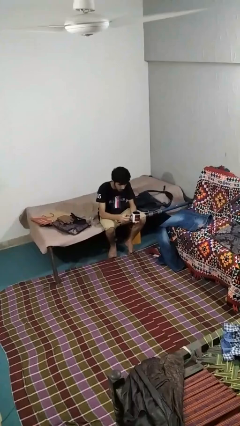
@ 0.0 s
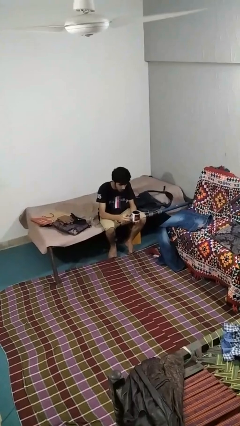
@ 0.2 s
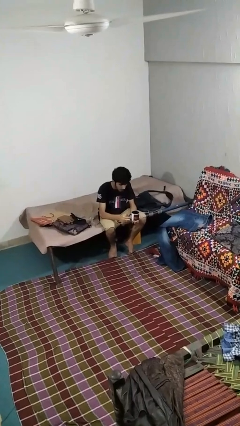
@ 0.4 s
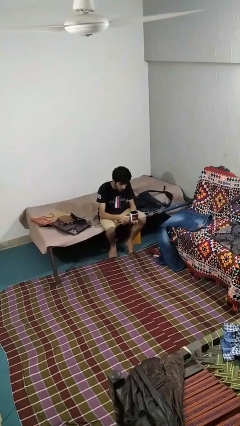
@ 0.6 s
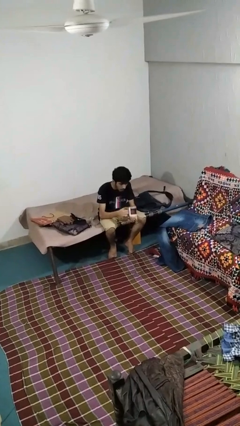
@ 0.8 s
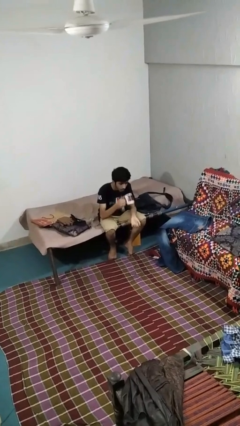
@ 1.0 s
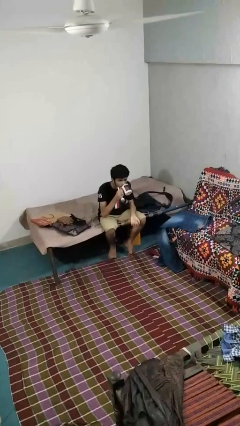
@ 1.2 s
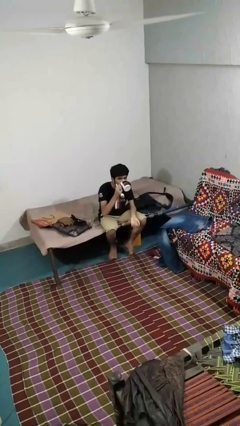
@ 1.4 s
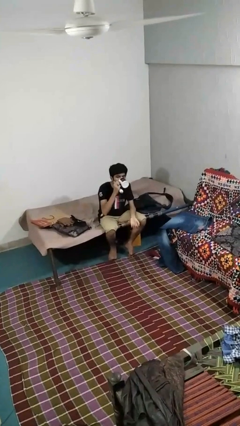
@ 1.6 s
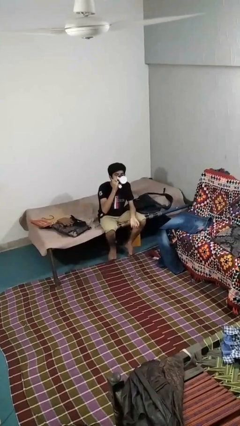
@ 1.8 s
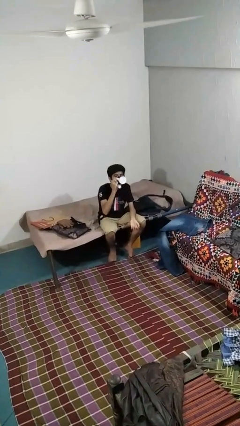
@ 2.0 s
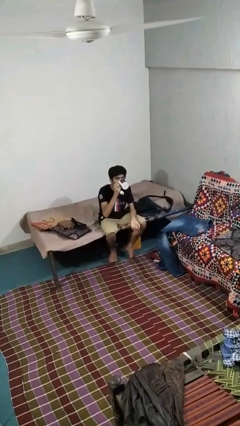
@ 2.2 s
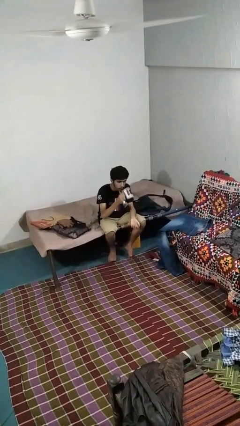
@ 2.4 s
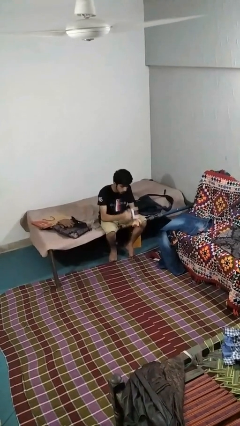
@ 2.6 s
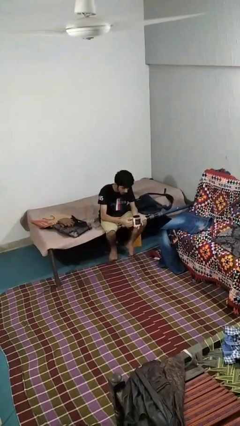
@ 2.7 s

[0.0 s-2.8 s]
person drinks from mug

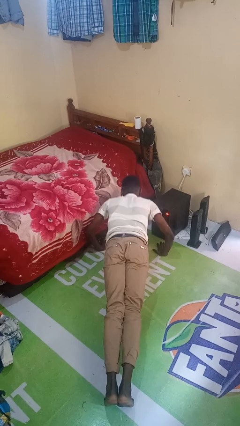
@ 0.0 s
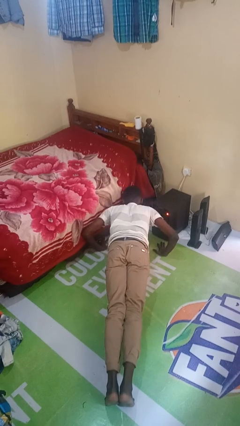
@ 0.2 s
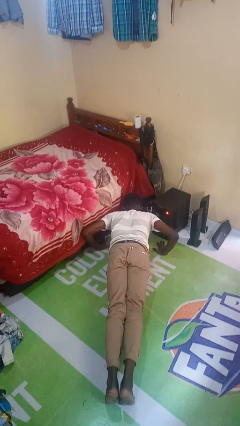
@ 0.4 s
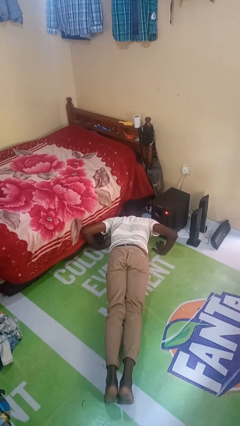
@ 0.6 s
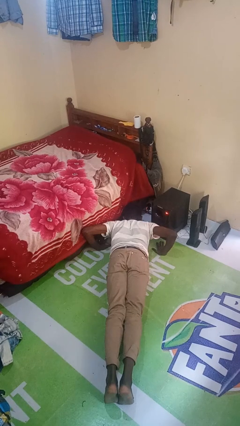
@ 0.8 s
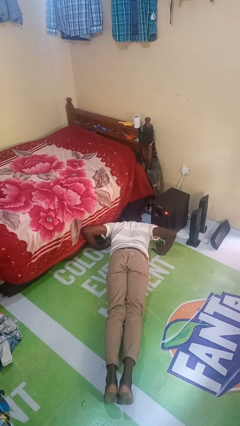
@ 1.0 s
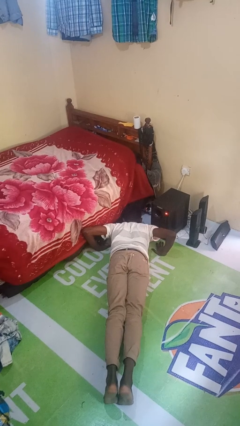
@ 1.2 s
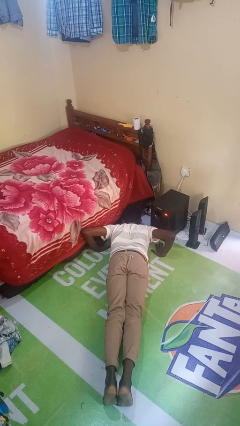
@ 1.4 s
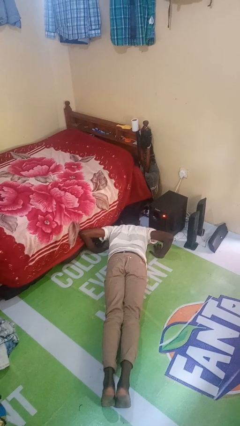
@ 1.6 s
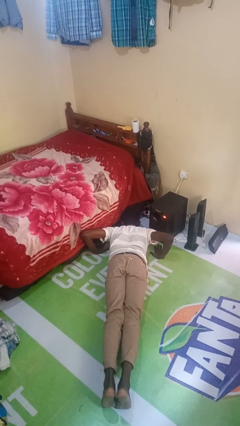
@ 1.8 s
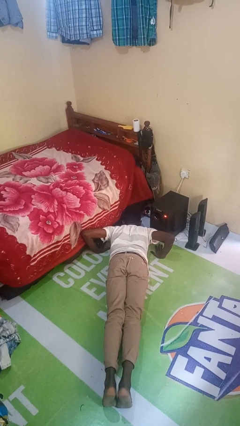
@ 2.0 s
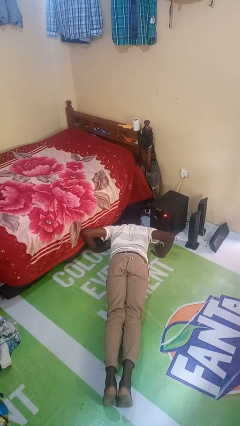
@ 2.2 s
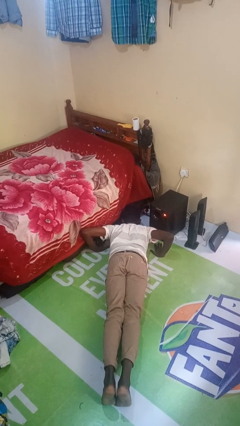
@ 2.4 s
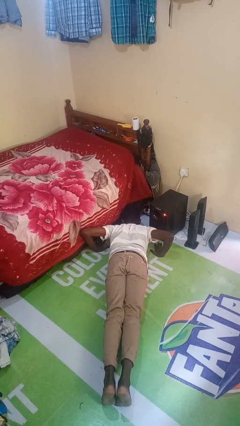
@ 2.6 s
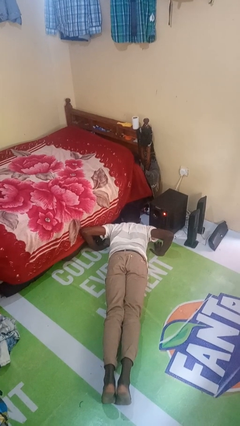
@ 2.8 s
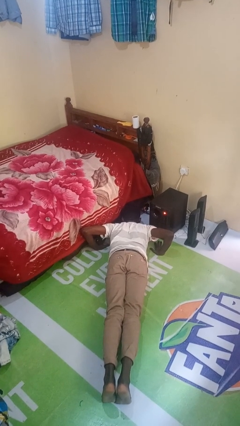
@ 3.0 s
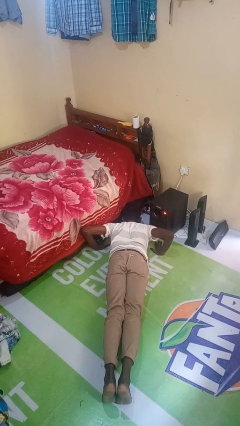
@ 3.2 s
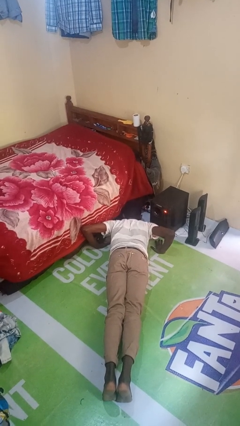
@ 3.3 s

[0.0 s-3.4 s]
person exercises with pushup

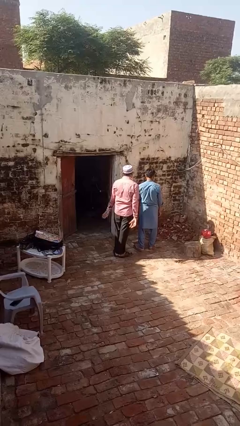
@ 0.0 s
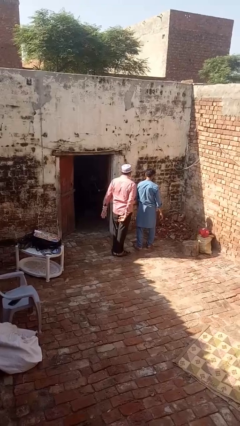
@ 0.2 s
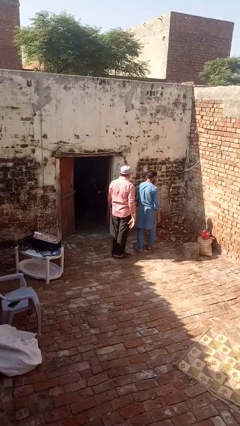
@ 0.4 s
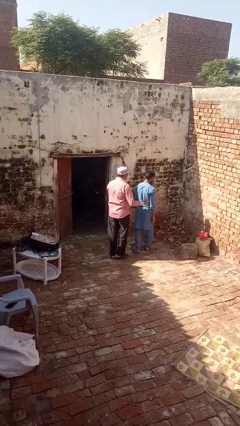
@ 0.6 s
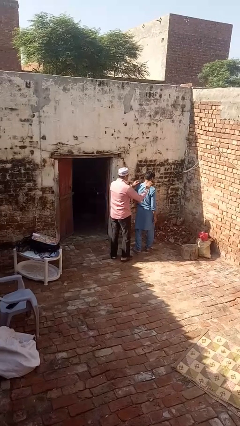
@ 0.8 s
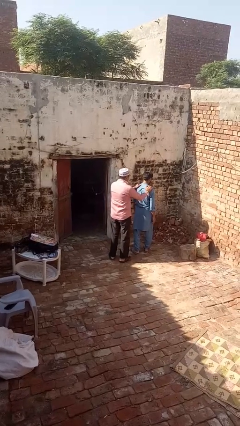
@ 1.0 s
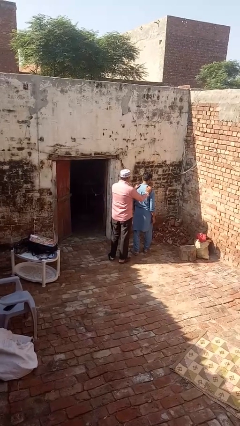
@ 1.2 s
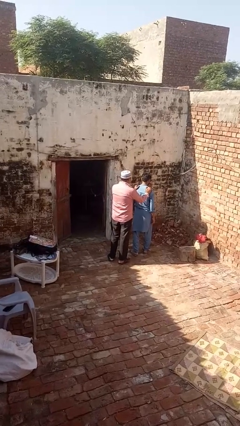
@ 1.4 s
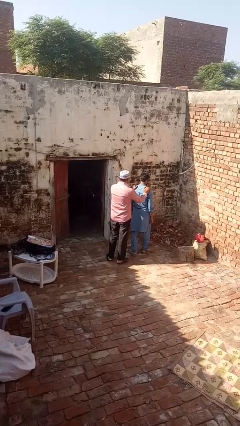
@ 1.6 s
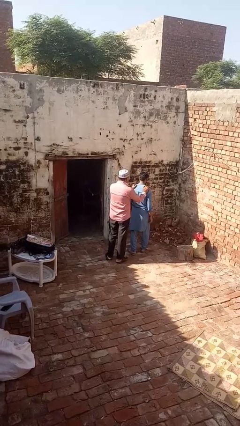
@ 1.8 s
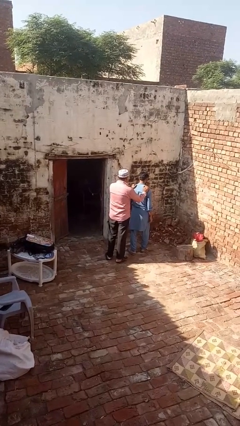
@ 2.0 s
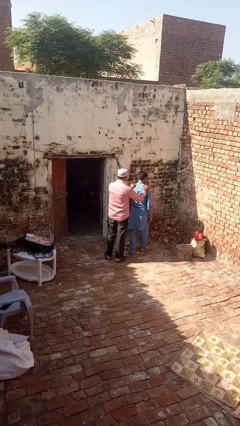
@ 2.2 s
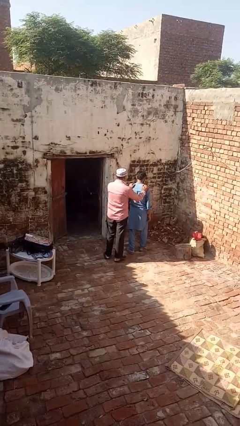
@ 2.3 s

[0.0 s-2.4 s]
person grabs person by shoulder

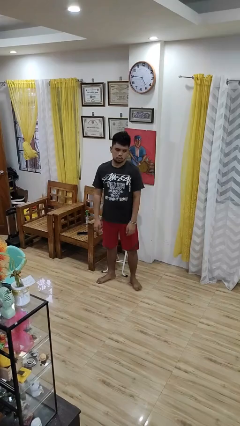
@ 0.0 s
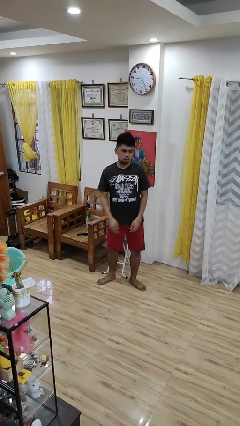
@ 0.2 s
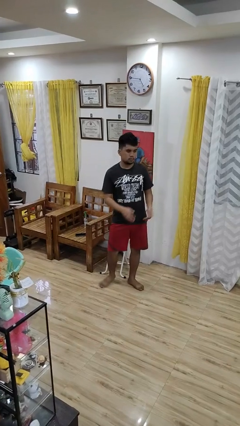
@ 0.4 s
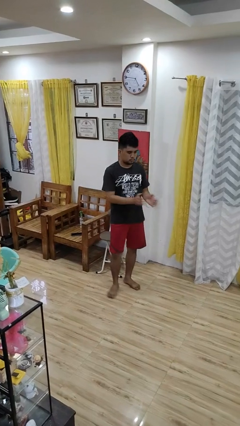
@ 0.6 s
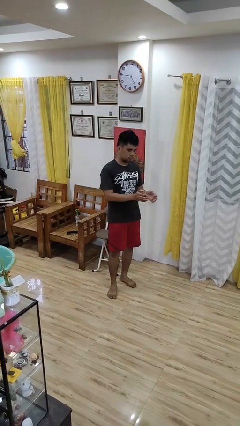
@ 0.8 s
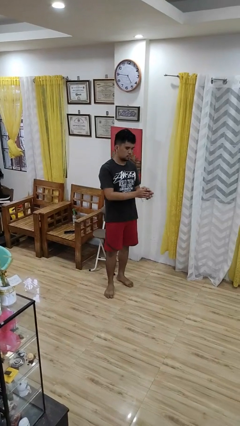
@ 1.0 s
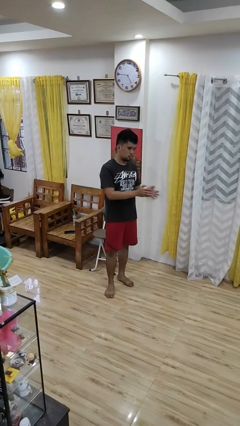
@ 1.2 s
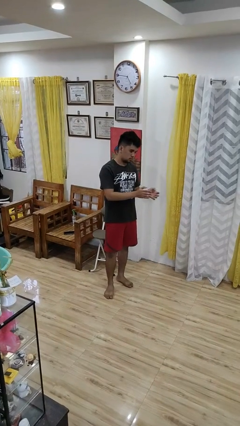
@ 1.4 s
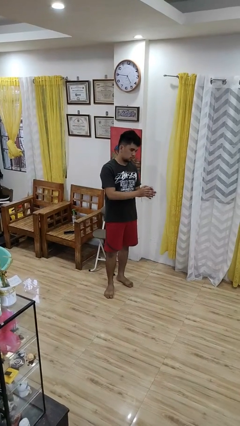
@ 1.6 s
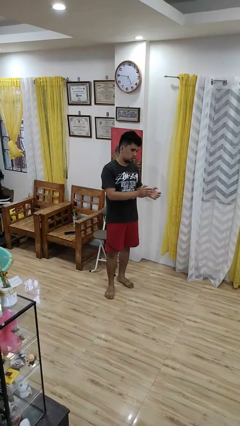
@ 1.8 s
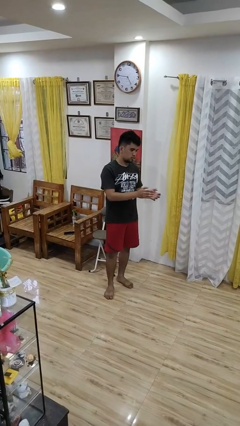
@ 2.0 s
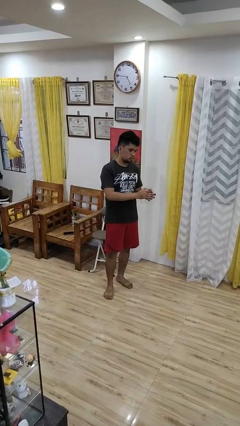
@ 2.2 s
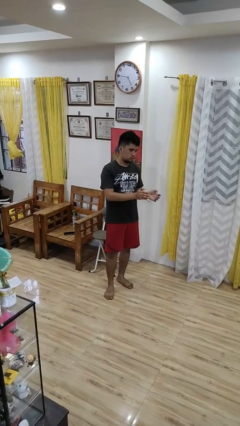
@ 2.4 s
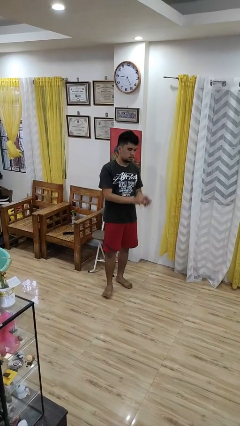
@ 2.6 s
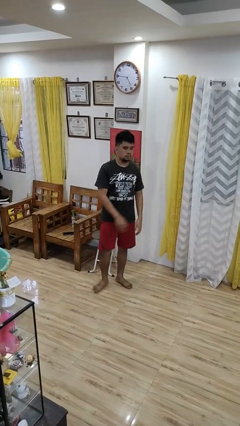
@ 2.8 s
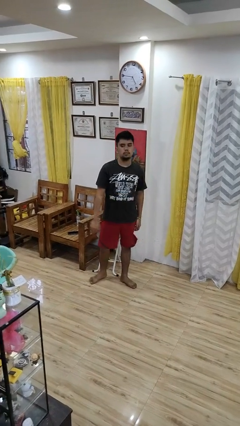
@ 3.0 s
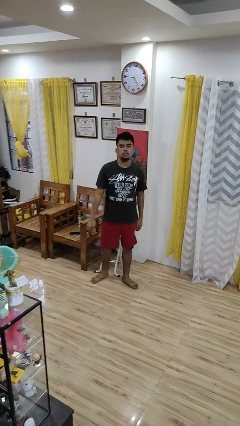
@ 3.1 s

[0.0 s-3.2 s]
person claps hands

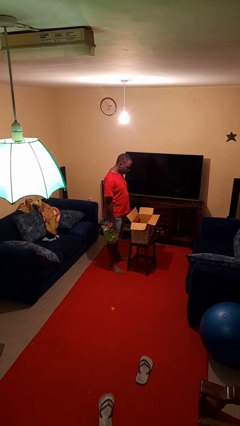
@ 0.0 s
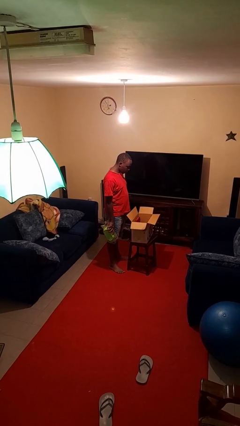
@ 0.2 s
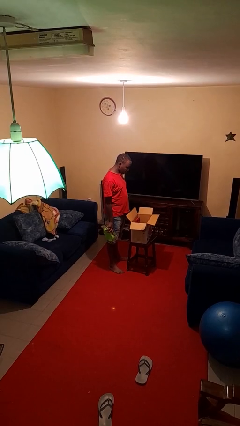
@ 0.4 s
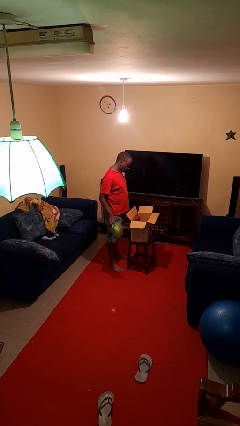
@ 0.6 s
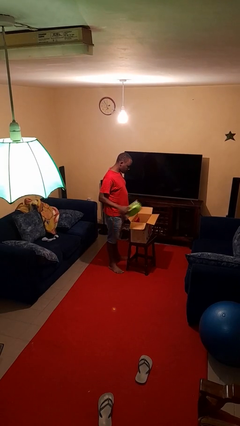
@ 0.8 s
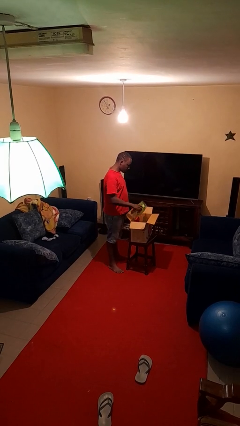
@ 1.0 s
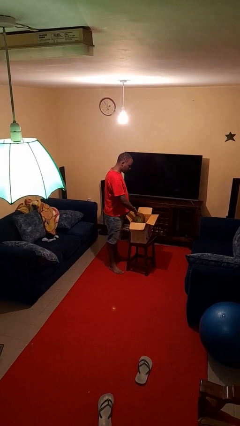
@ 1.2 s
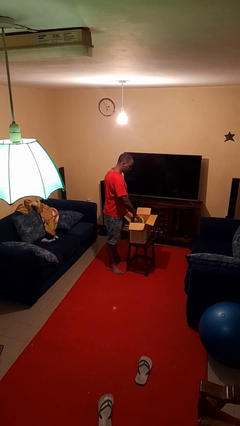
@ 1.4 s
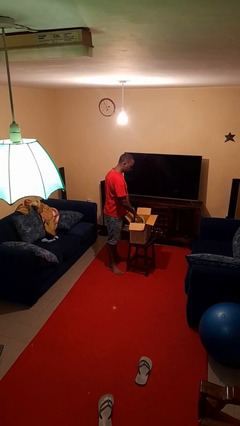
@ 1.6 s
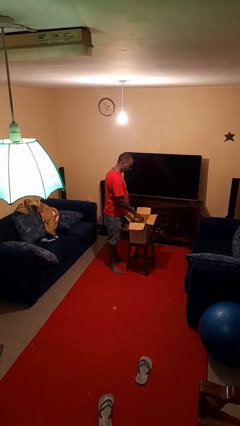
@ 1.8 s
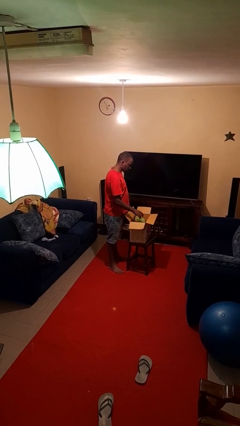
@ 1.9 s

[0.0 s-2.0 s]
person puts object into box

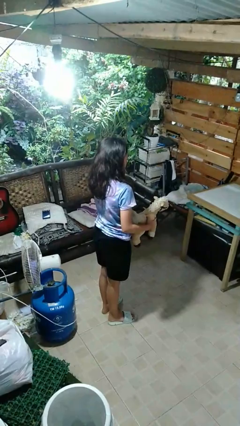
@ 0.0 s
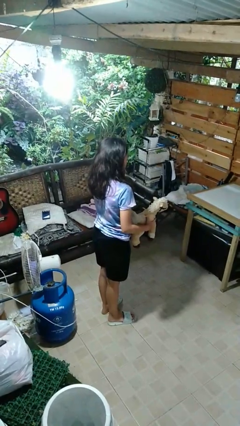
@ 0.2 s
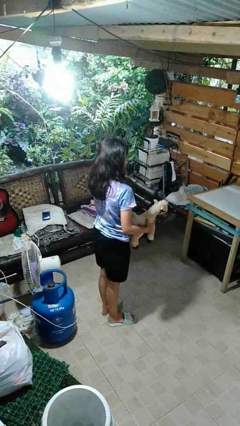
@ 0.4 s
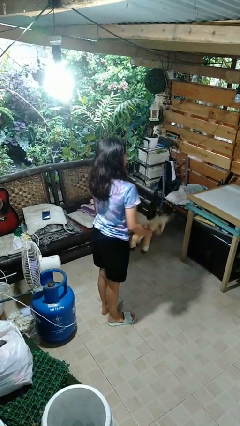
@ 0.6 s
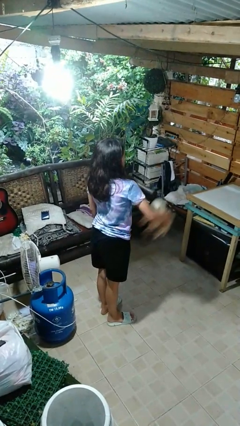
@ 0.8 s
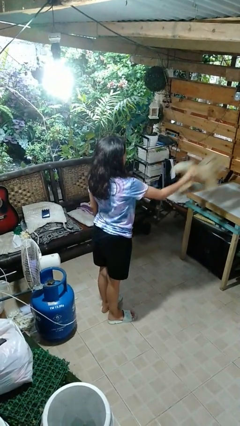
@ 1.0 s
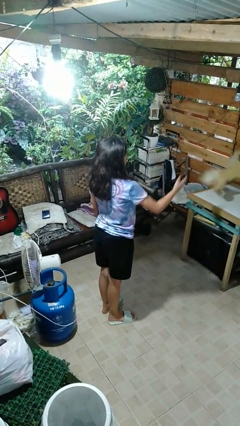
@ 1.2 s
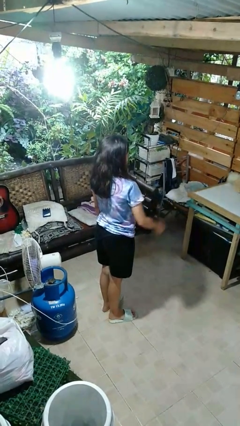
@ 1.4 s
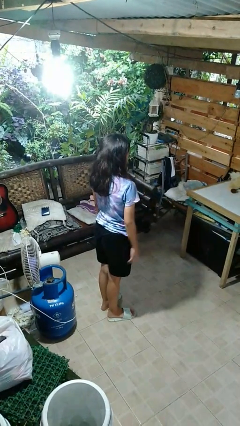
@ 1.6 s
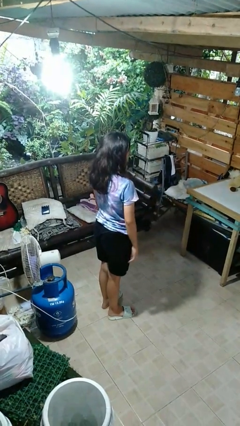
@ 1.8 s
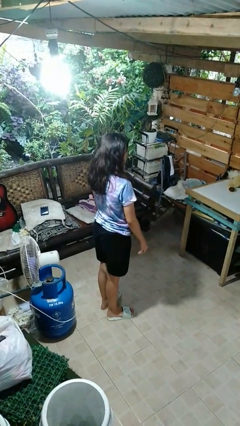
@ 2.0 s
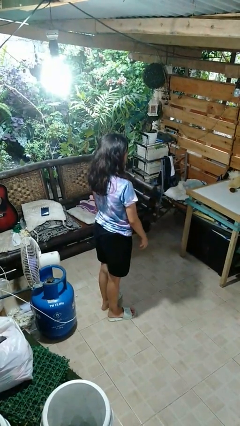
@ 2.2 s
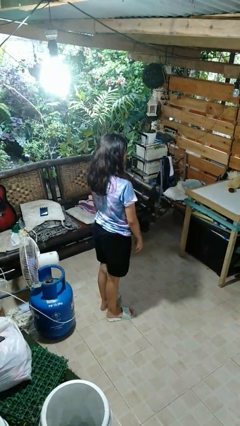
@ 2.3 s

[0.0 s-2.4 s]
person throws object on table

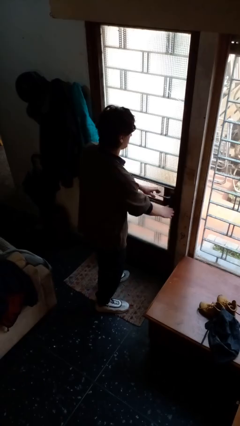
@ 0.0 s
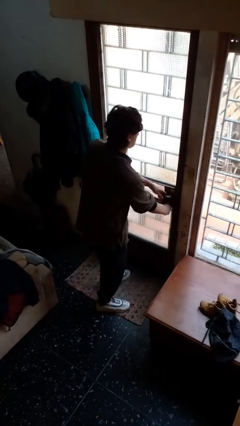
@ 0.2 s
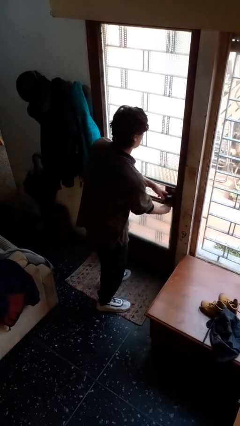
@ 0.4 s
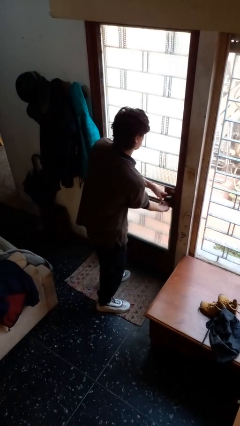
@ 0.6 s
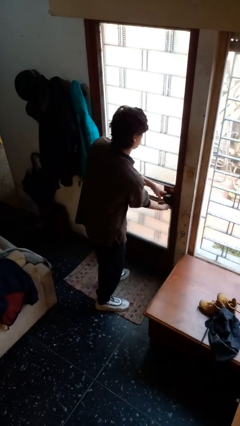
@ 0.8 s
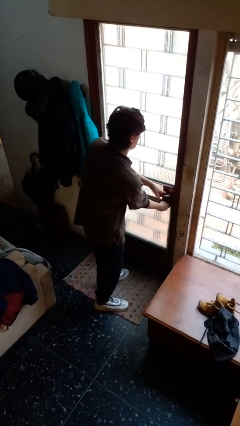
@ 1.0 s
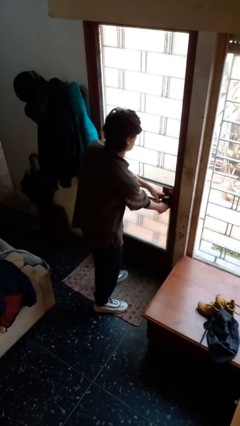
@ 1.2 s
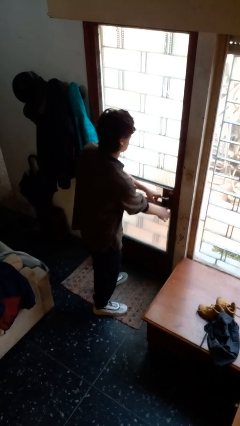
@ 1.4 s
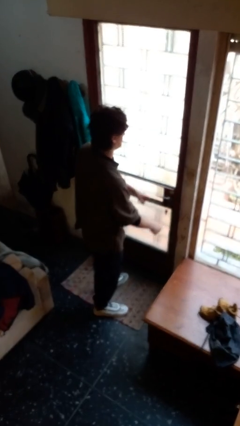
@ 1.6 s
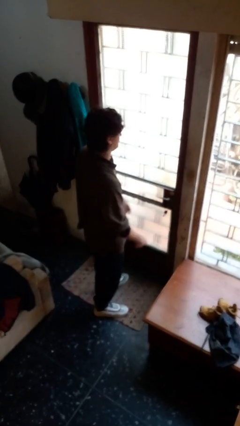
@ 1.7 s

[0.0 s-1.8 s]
person locks door with keys
